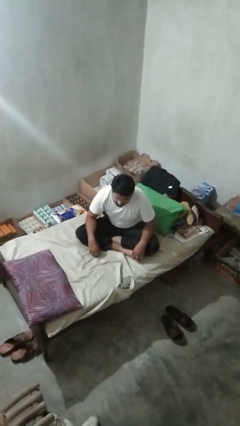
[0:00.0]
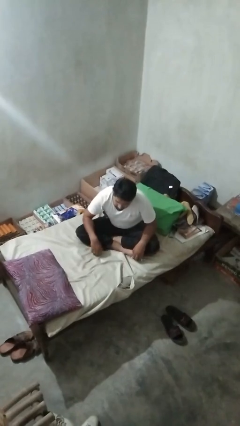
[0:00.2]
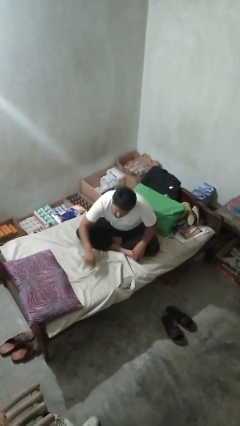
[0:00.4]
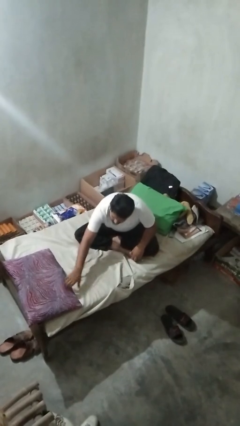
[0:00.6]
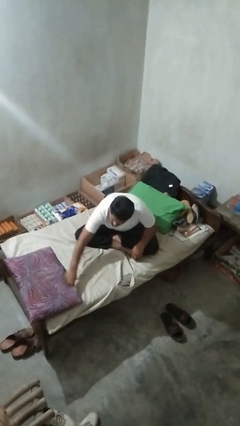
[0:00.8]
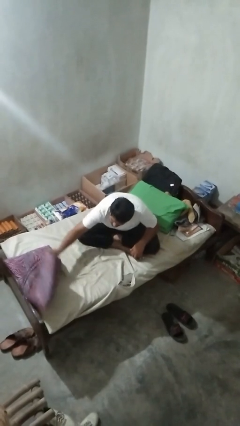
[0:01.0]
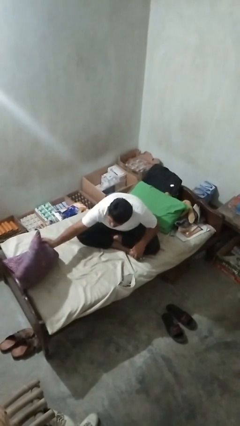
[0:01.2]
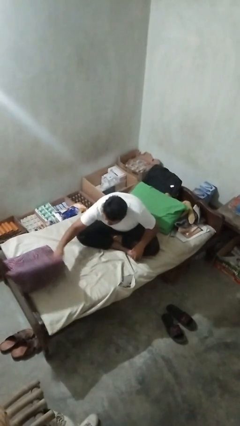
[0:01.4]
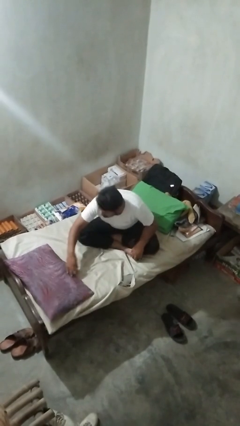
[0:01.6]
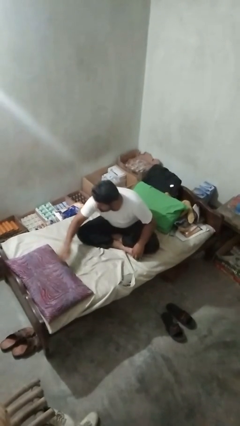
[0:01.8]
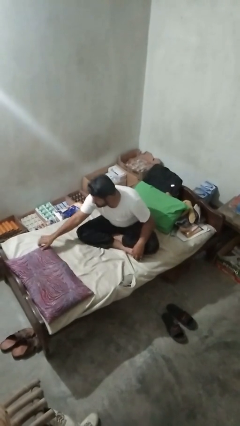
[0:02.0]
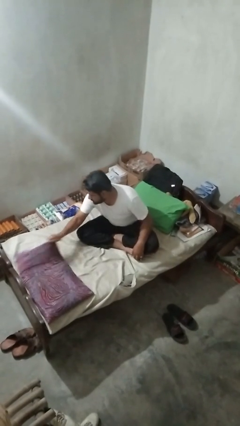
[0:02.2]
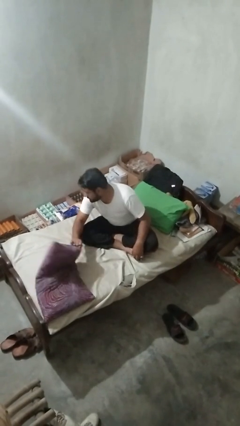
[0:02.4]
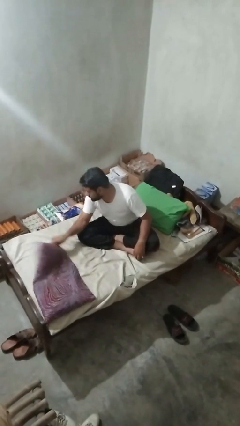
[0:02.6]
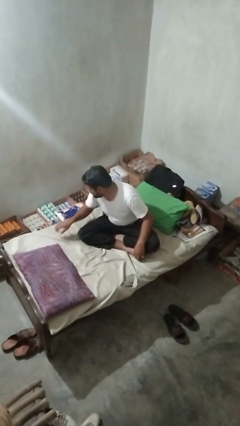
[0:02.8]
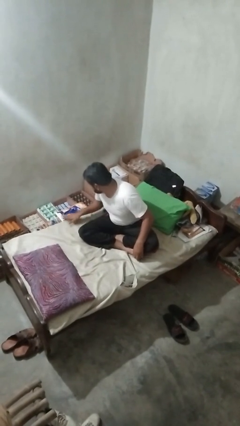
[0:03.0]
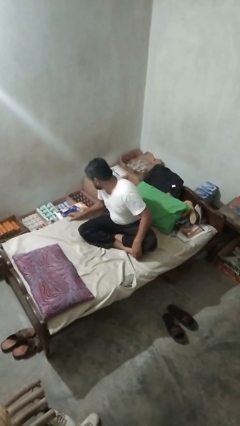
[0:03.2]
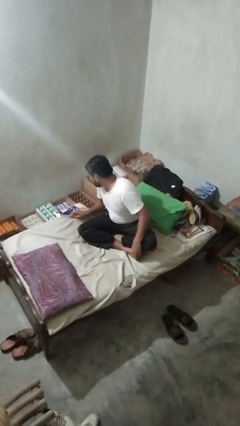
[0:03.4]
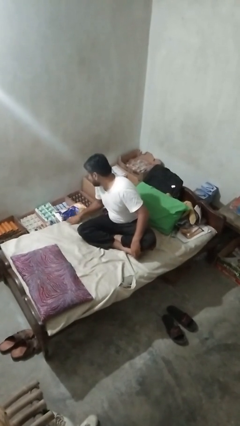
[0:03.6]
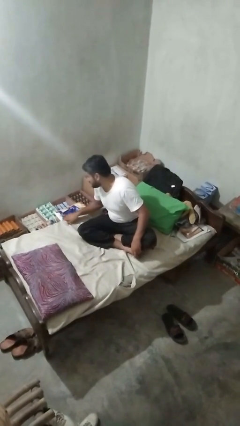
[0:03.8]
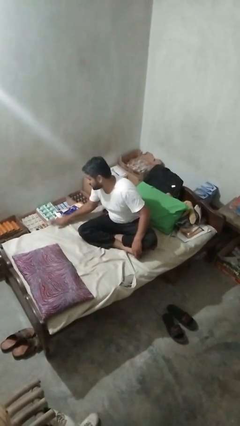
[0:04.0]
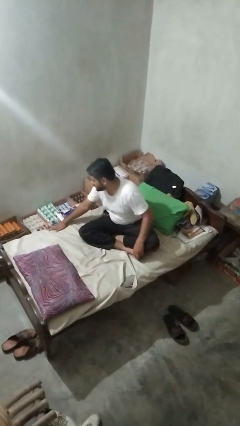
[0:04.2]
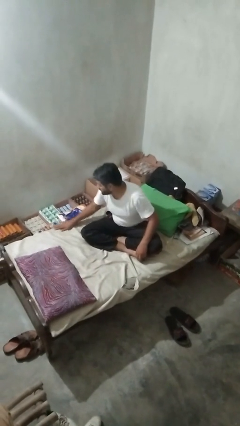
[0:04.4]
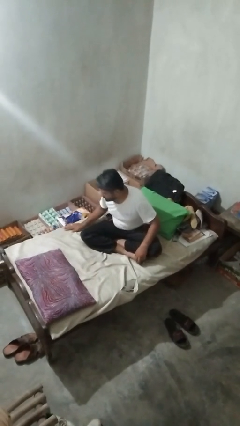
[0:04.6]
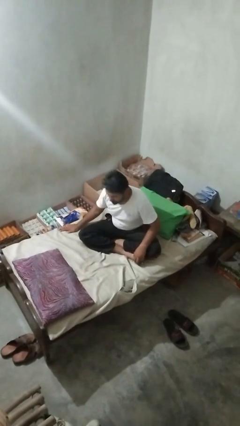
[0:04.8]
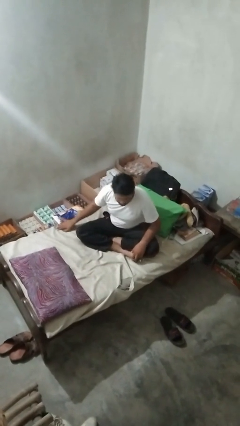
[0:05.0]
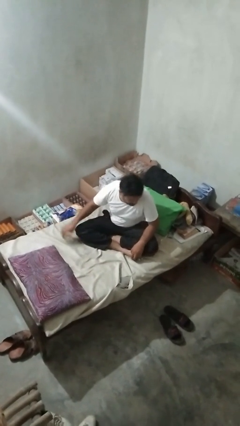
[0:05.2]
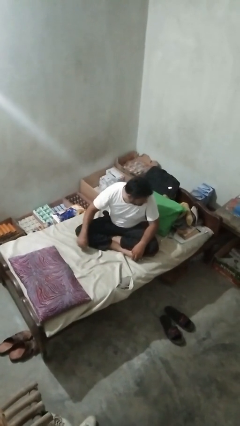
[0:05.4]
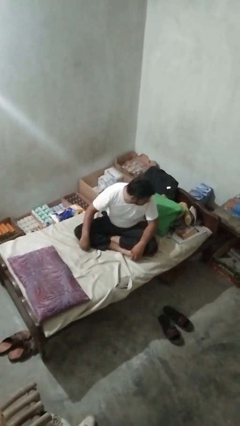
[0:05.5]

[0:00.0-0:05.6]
person searches under bed

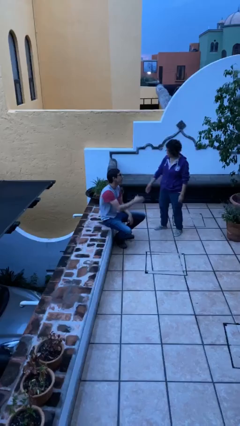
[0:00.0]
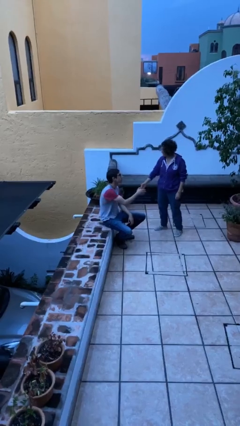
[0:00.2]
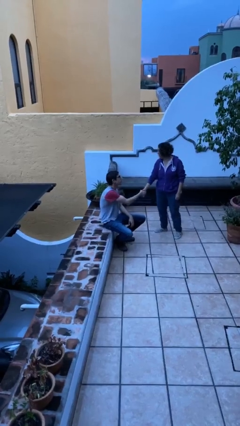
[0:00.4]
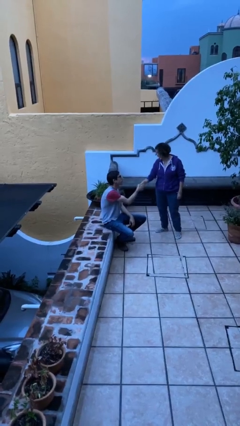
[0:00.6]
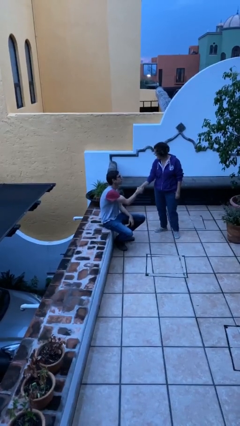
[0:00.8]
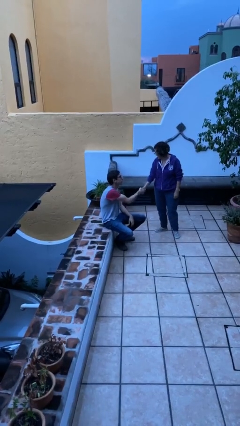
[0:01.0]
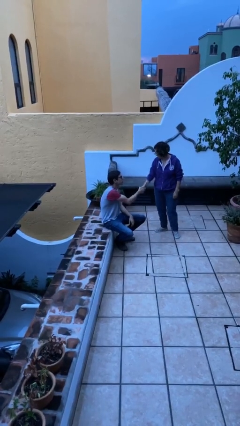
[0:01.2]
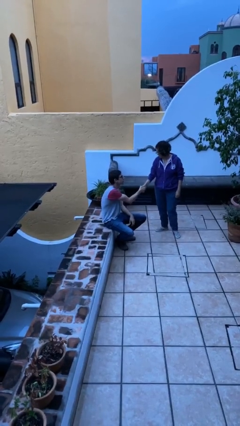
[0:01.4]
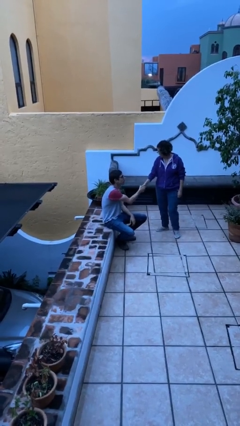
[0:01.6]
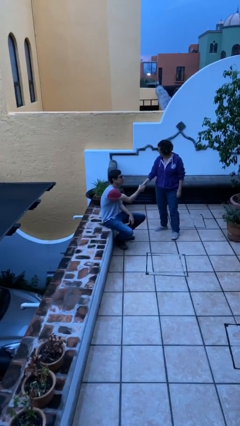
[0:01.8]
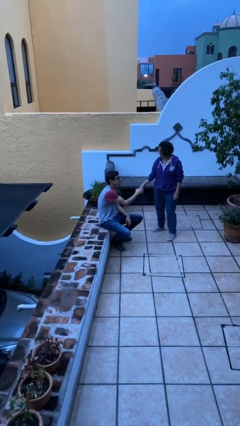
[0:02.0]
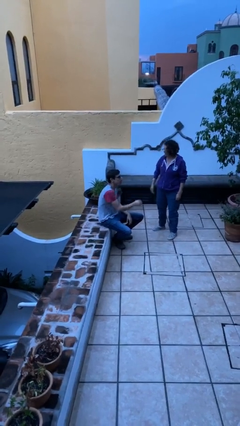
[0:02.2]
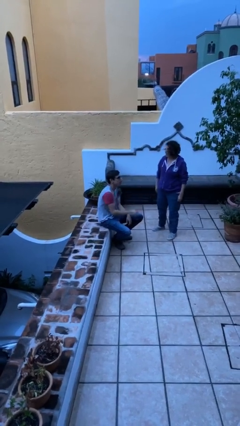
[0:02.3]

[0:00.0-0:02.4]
person shakes hand

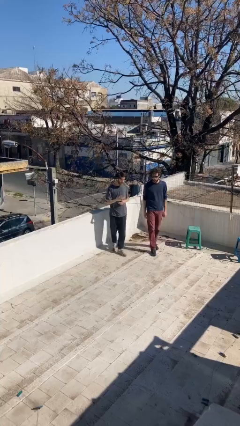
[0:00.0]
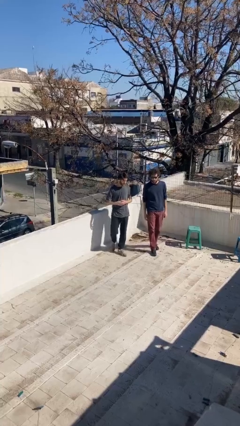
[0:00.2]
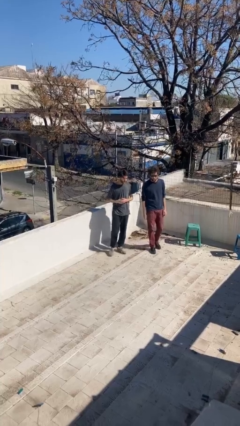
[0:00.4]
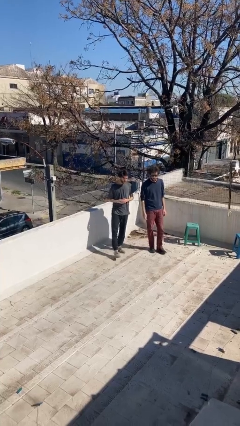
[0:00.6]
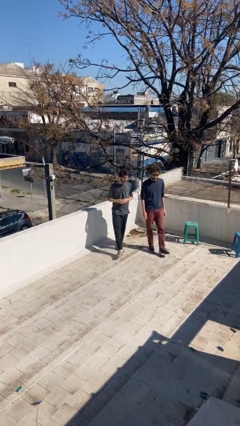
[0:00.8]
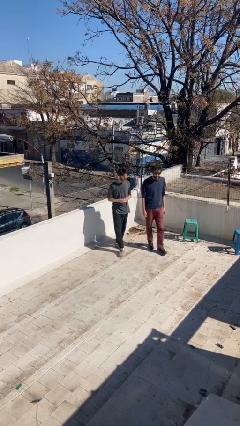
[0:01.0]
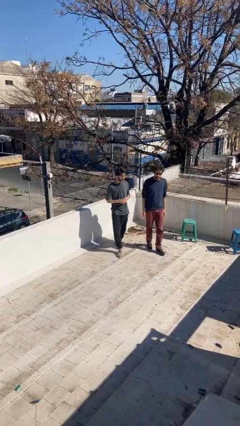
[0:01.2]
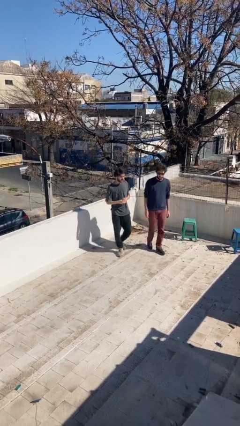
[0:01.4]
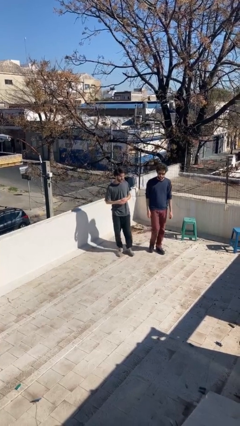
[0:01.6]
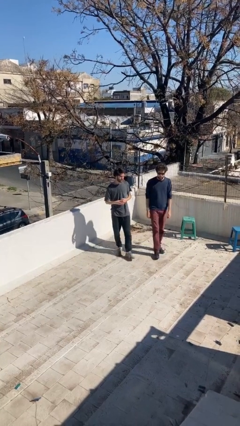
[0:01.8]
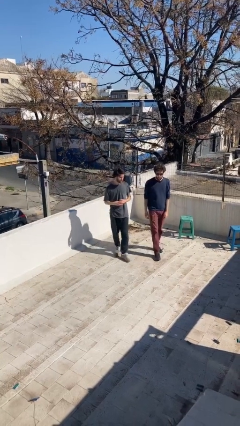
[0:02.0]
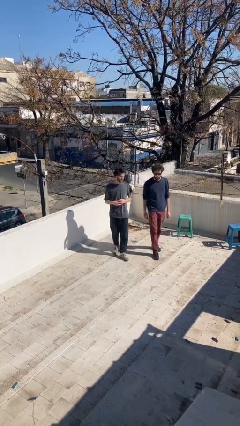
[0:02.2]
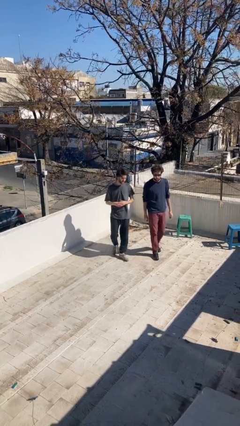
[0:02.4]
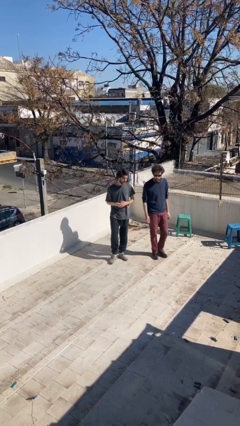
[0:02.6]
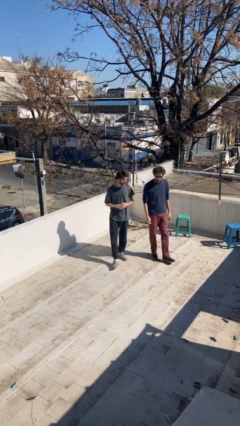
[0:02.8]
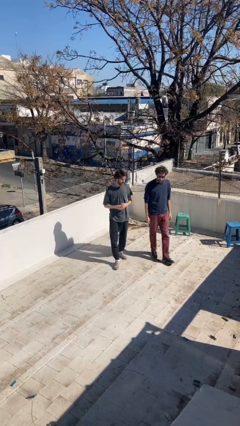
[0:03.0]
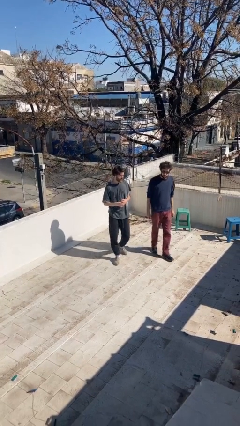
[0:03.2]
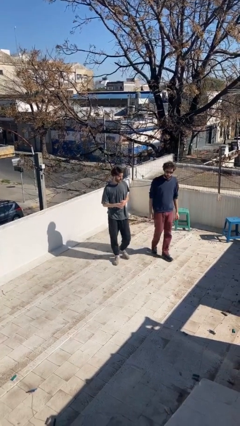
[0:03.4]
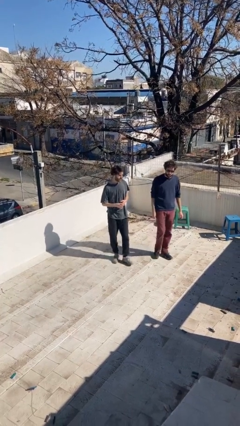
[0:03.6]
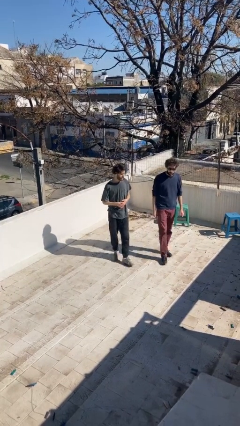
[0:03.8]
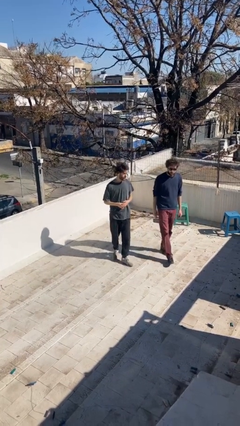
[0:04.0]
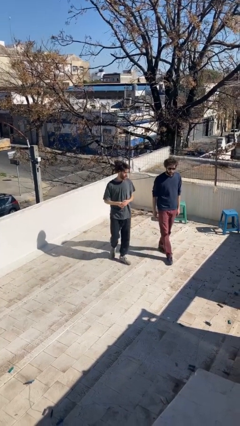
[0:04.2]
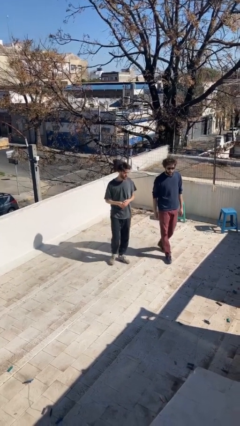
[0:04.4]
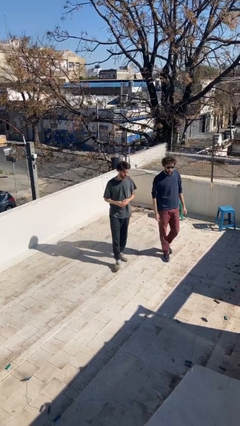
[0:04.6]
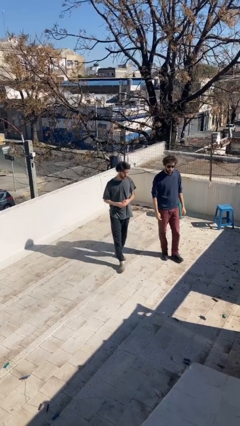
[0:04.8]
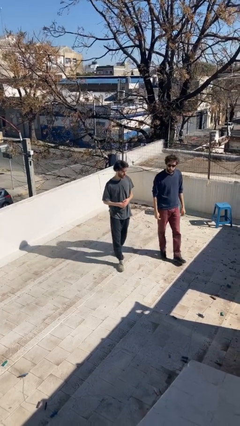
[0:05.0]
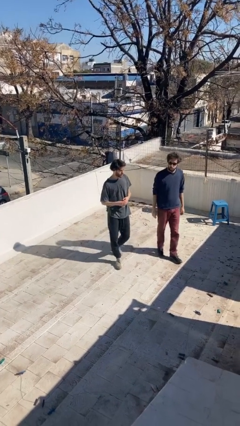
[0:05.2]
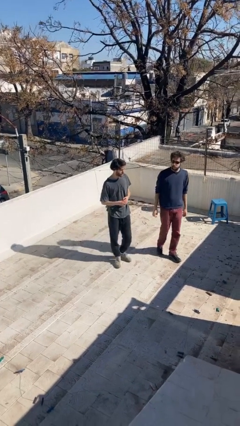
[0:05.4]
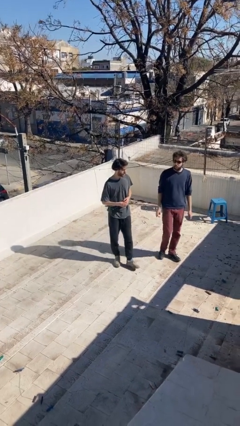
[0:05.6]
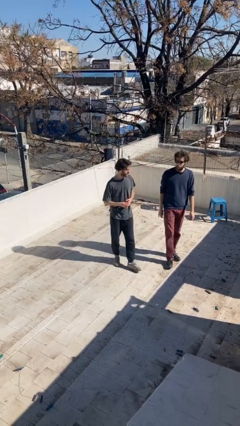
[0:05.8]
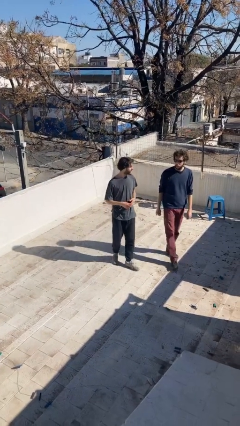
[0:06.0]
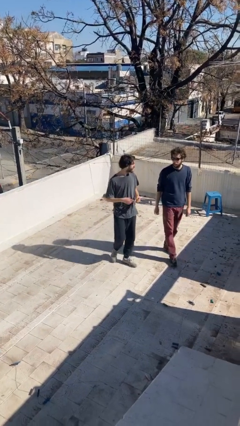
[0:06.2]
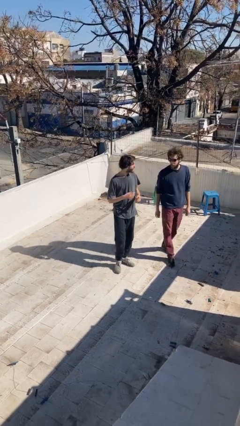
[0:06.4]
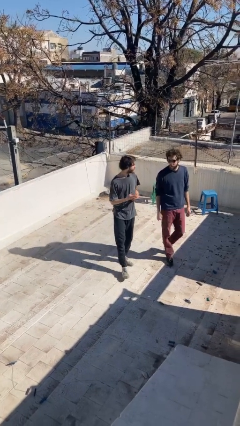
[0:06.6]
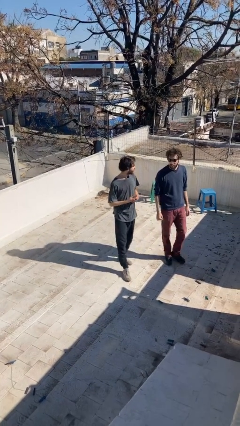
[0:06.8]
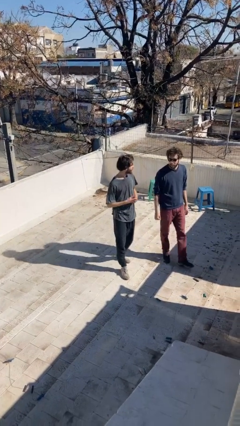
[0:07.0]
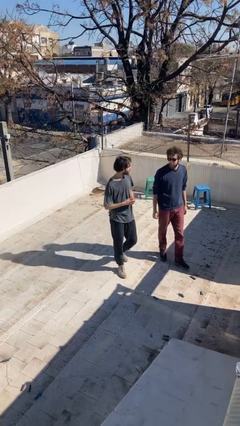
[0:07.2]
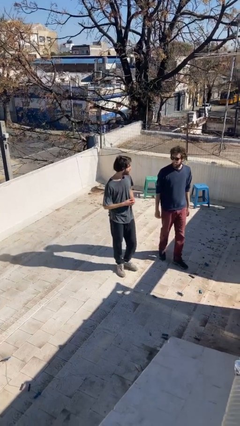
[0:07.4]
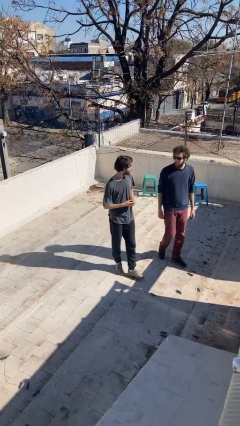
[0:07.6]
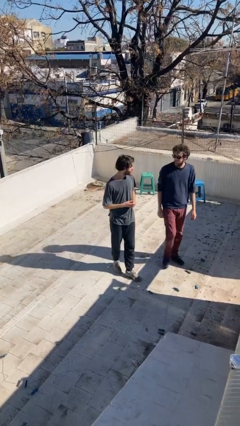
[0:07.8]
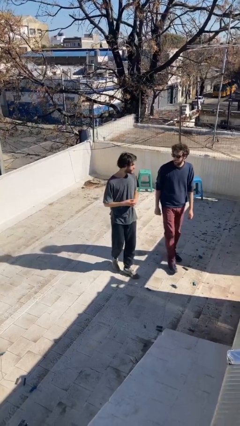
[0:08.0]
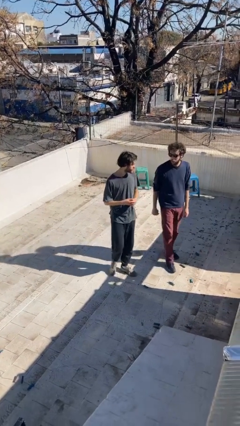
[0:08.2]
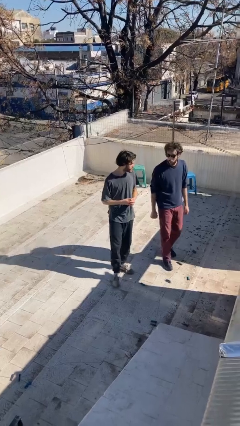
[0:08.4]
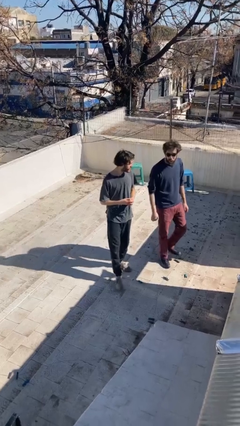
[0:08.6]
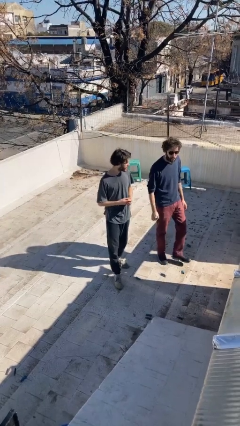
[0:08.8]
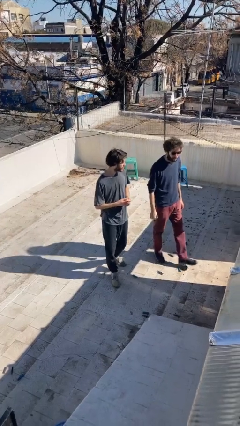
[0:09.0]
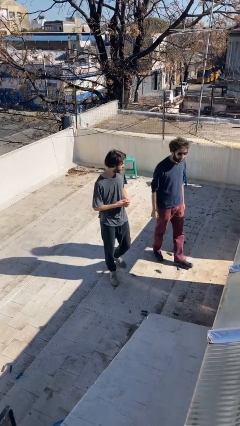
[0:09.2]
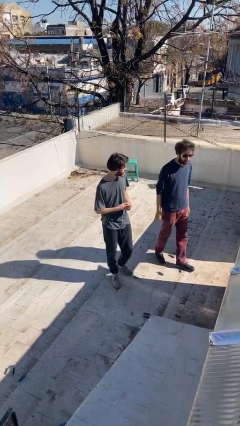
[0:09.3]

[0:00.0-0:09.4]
person talks to person

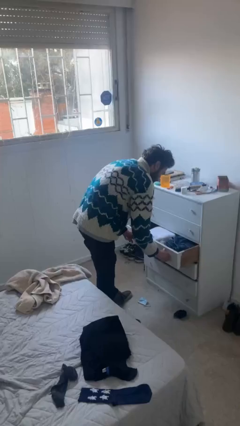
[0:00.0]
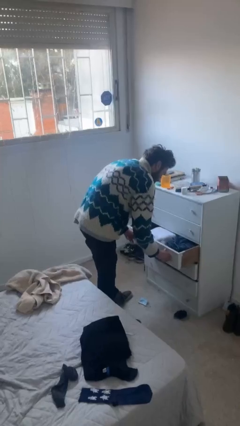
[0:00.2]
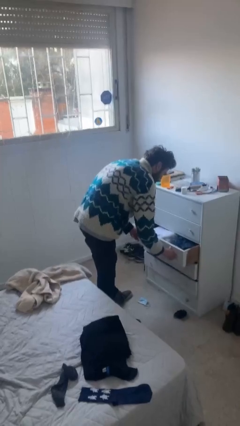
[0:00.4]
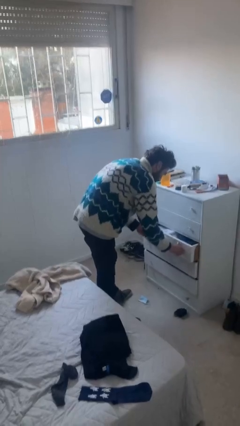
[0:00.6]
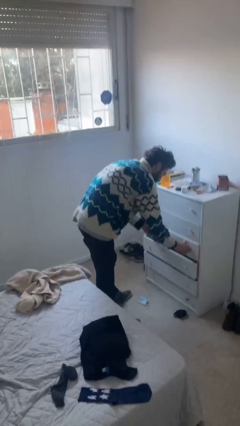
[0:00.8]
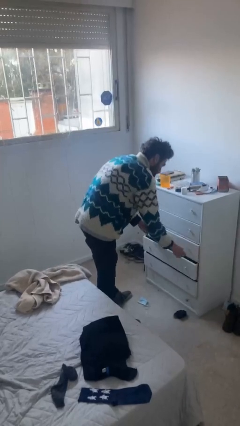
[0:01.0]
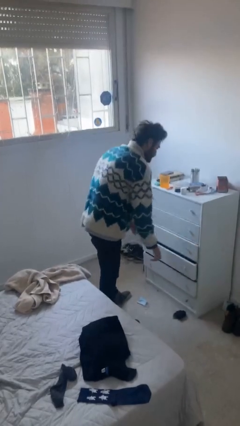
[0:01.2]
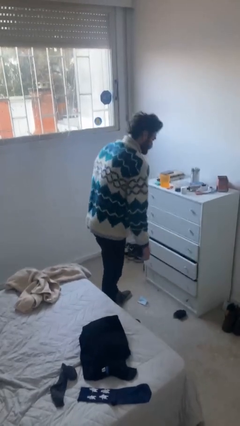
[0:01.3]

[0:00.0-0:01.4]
person closes dresser drawer
